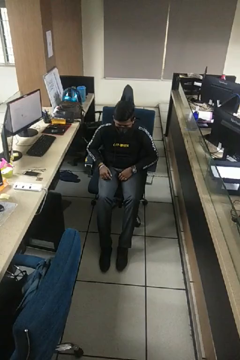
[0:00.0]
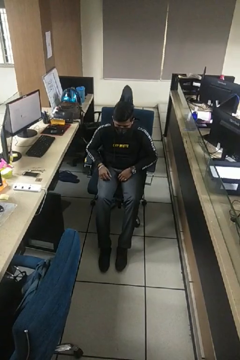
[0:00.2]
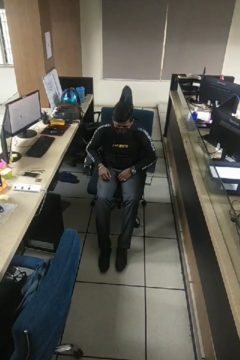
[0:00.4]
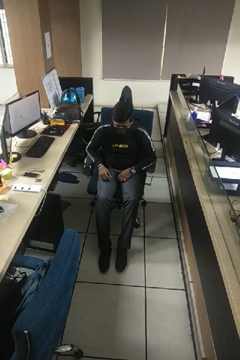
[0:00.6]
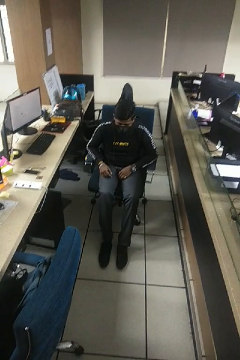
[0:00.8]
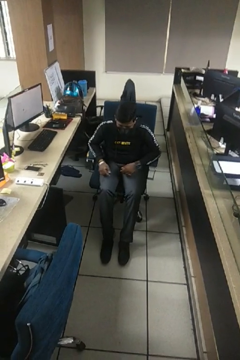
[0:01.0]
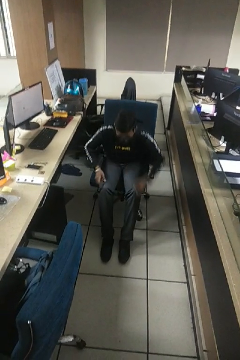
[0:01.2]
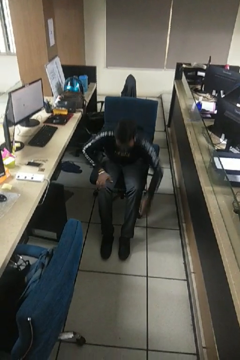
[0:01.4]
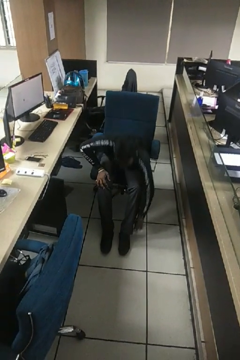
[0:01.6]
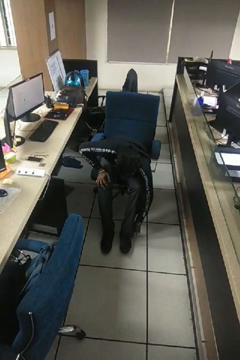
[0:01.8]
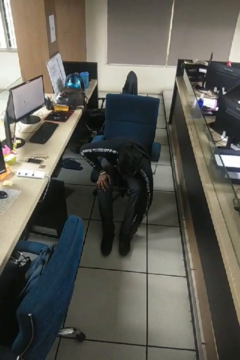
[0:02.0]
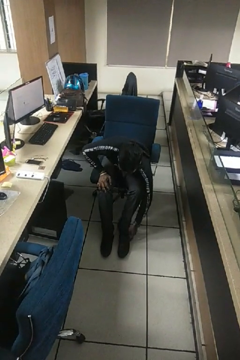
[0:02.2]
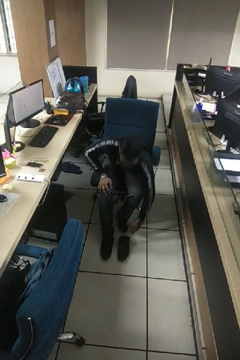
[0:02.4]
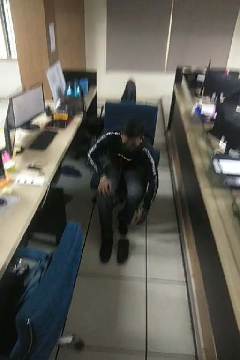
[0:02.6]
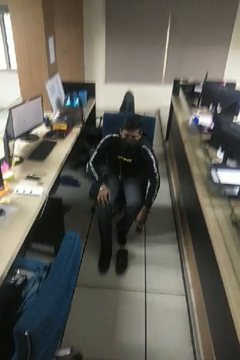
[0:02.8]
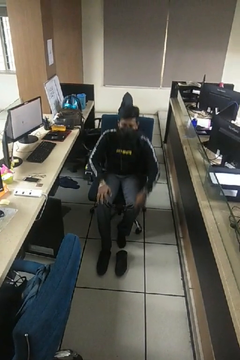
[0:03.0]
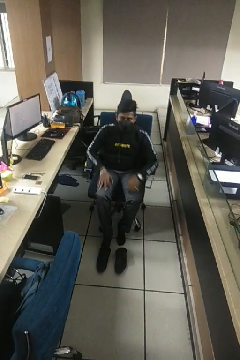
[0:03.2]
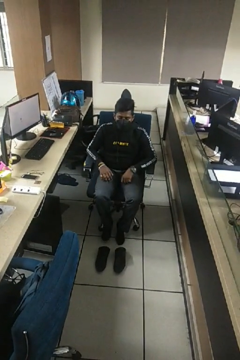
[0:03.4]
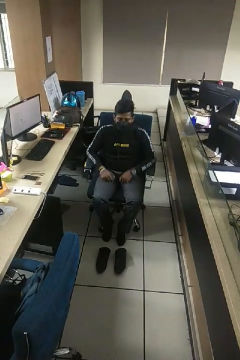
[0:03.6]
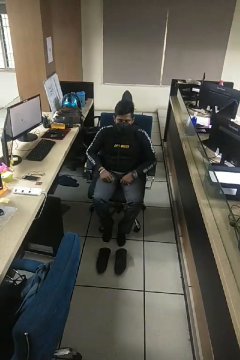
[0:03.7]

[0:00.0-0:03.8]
person takes off shoes

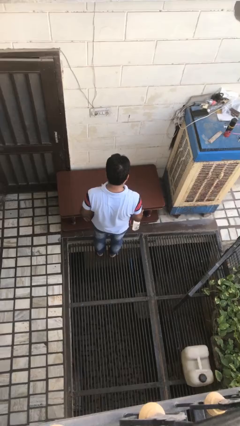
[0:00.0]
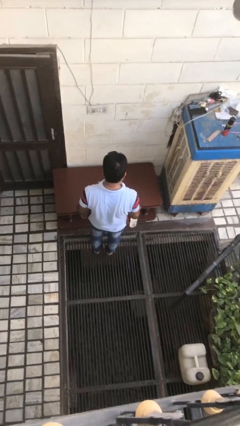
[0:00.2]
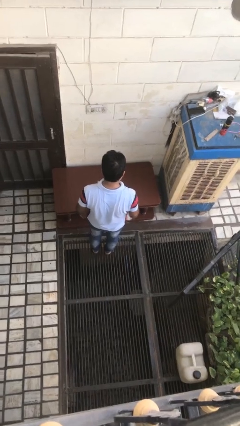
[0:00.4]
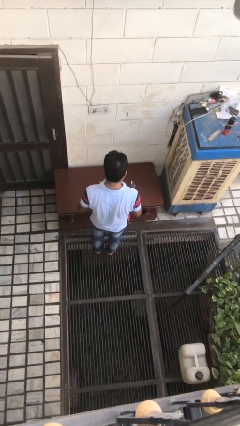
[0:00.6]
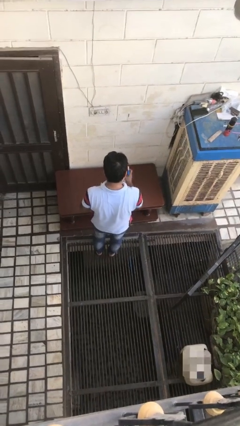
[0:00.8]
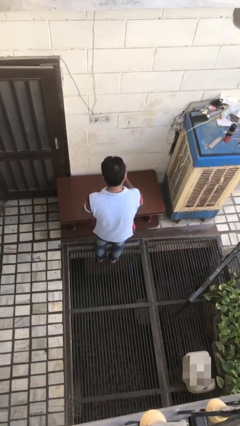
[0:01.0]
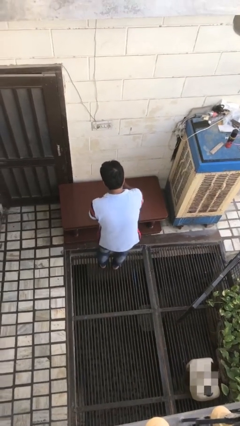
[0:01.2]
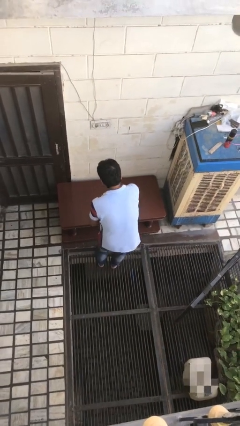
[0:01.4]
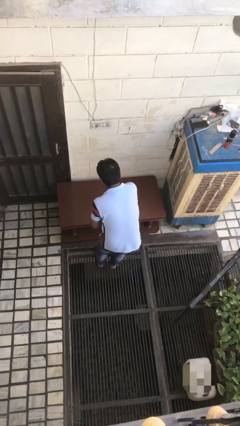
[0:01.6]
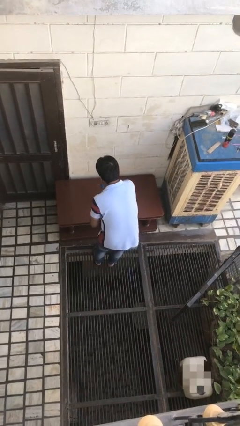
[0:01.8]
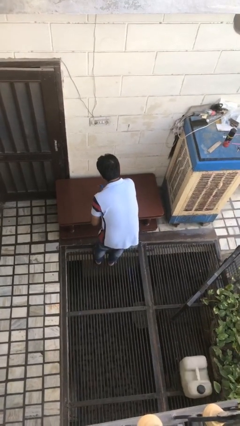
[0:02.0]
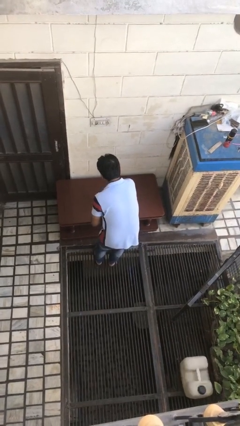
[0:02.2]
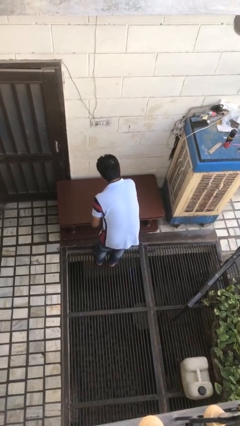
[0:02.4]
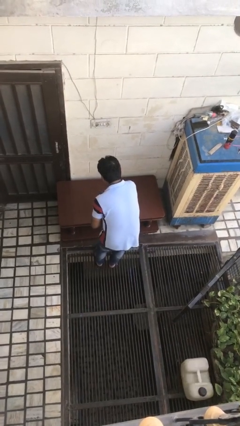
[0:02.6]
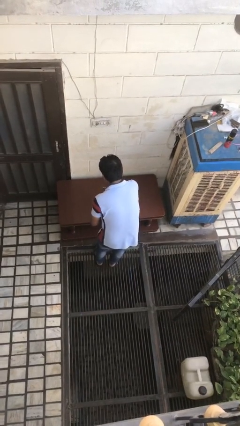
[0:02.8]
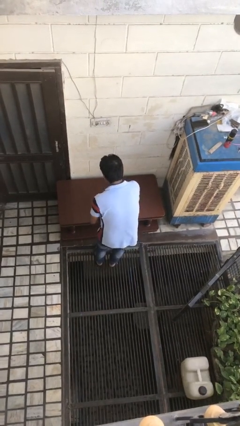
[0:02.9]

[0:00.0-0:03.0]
person sprays from bottle

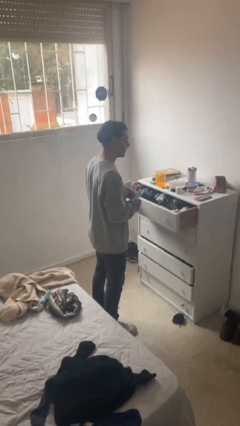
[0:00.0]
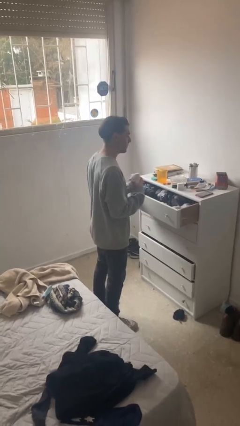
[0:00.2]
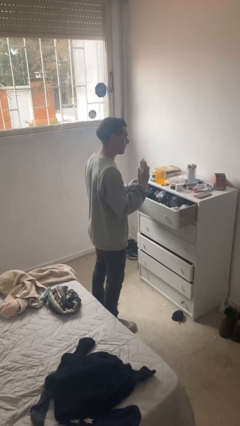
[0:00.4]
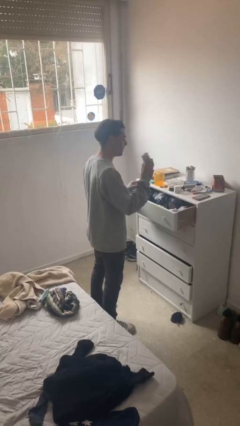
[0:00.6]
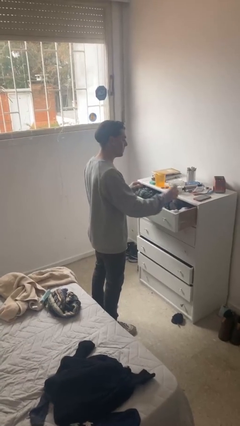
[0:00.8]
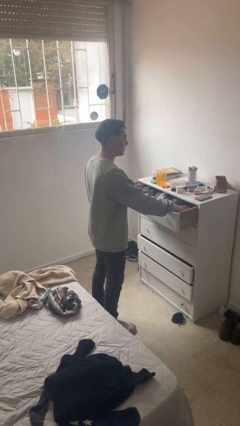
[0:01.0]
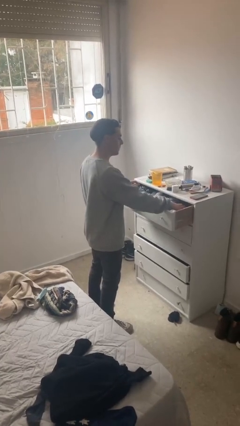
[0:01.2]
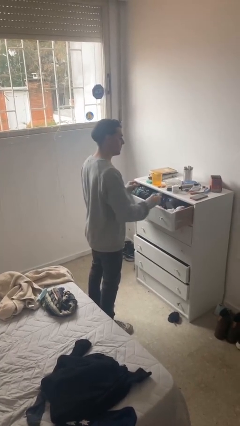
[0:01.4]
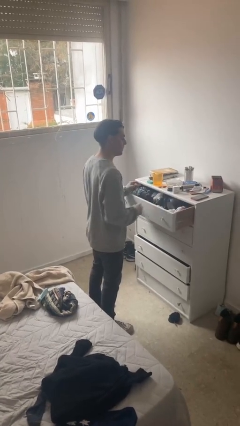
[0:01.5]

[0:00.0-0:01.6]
person puts clothes into dresser

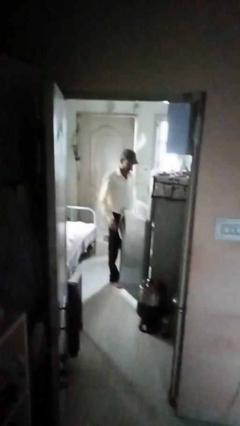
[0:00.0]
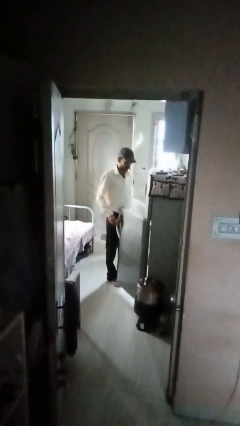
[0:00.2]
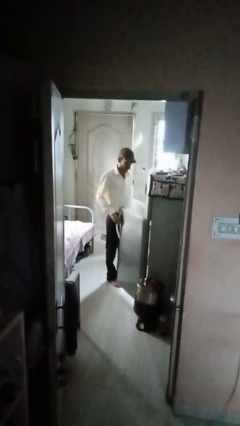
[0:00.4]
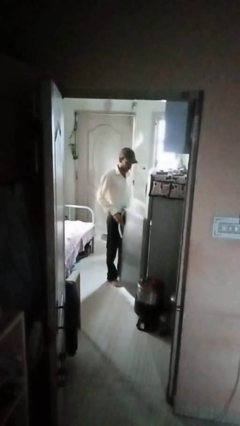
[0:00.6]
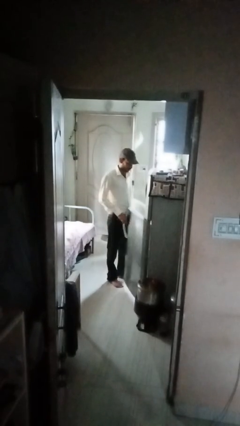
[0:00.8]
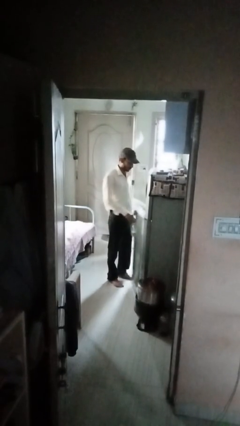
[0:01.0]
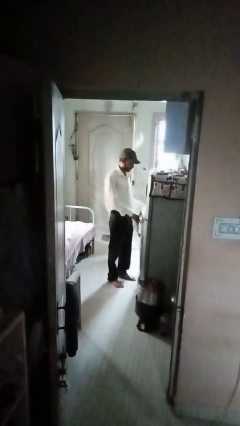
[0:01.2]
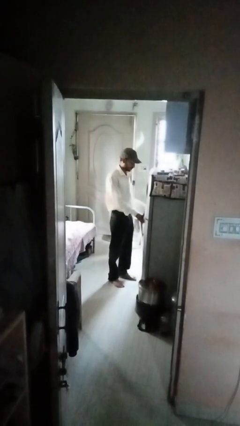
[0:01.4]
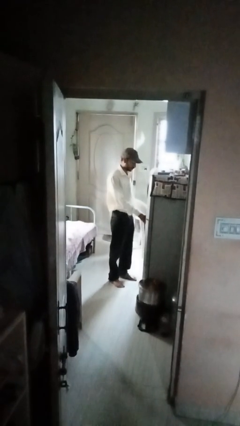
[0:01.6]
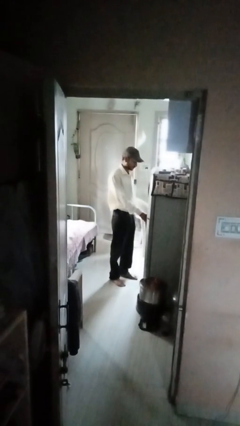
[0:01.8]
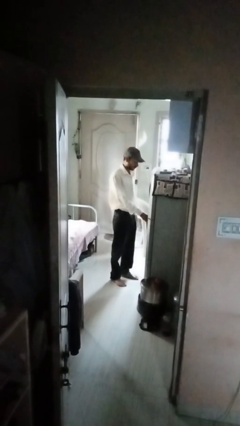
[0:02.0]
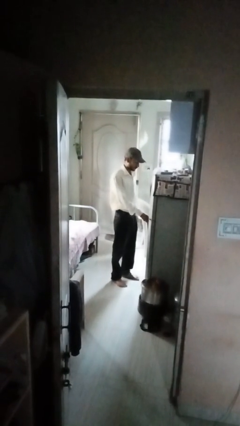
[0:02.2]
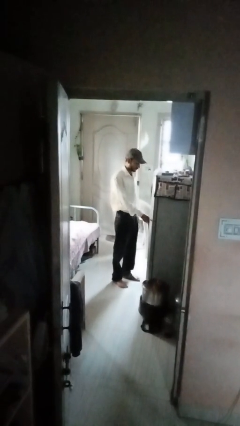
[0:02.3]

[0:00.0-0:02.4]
person closes refrigerator

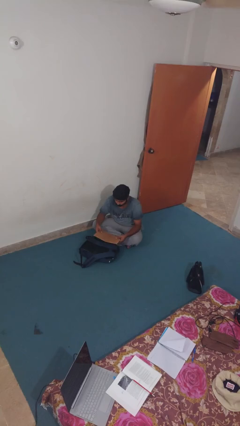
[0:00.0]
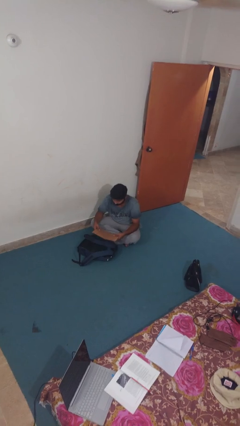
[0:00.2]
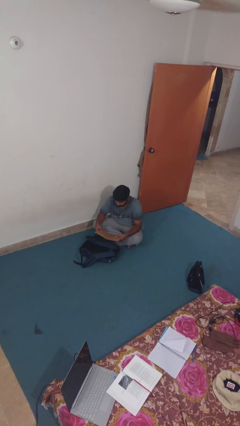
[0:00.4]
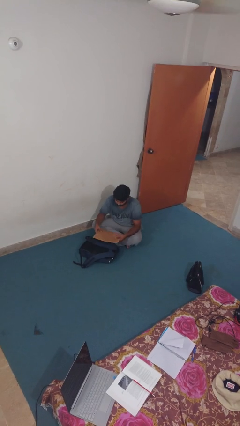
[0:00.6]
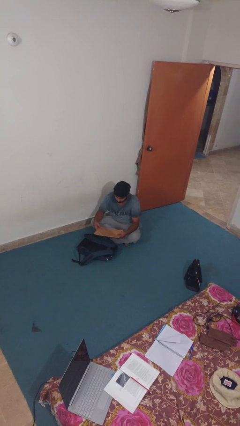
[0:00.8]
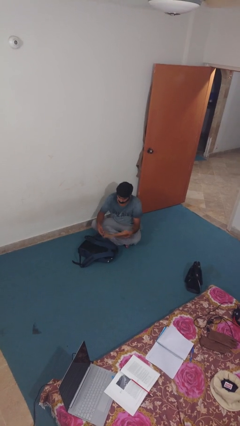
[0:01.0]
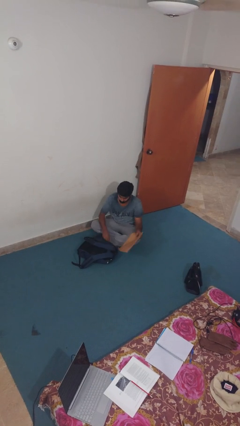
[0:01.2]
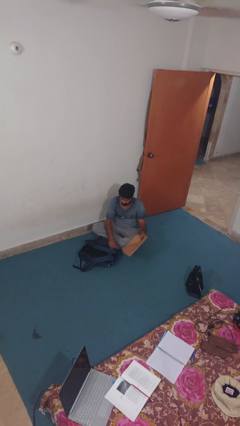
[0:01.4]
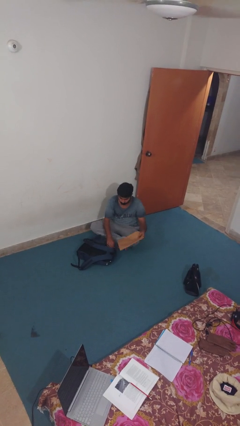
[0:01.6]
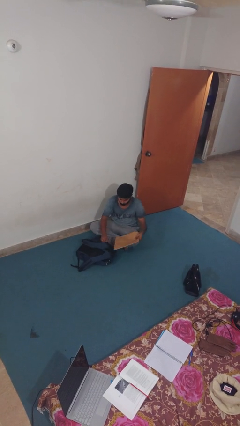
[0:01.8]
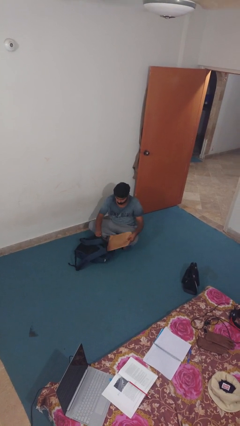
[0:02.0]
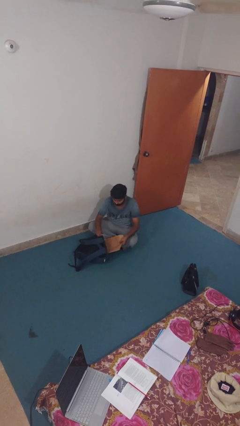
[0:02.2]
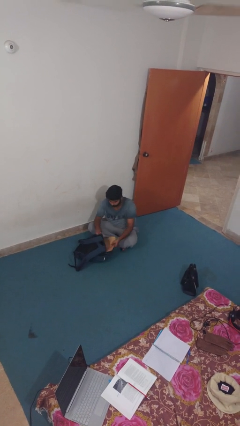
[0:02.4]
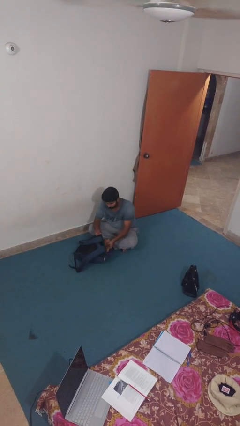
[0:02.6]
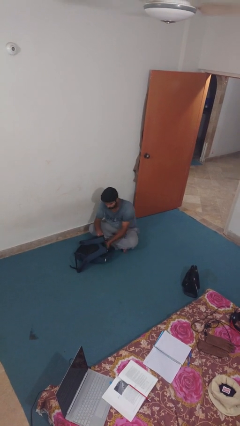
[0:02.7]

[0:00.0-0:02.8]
person puts object into backpack

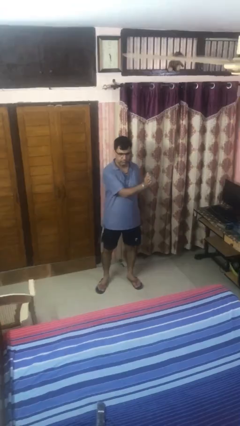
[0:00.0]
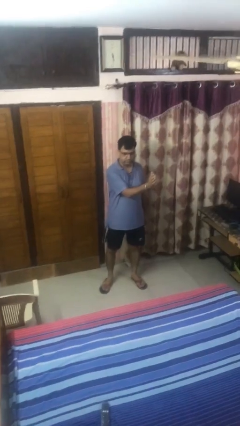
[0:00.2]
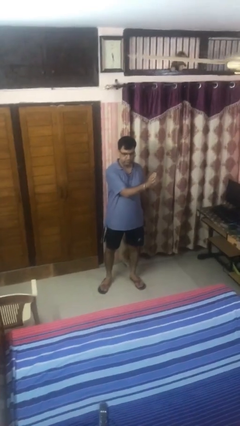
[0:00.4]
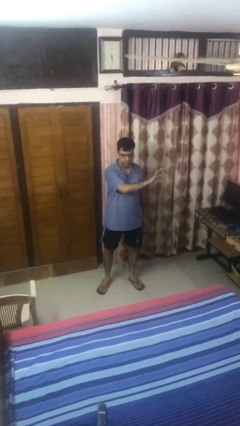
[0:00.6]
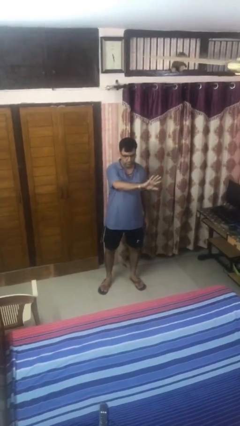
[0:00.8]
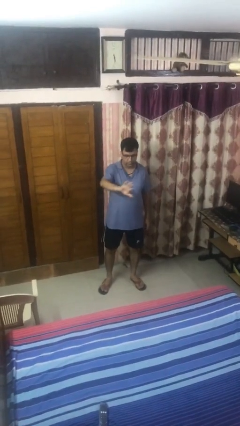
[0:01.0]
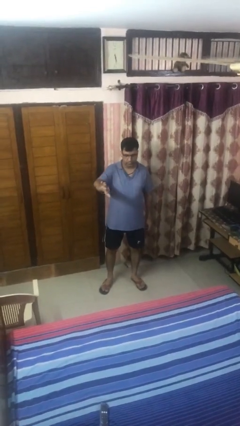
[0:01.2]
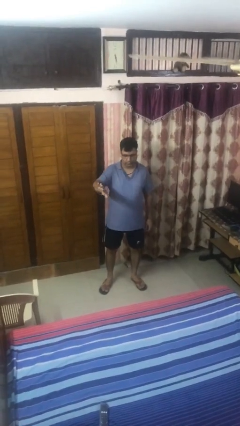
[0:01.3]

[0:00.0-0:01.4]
person gestures swipe right

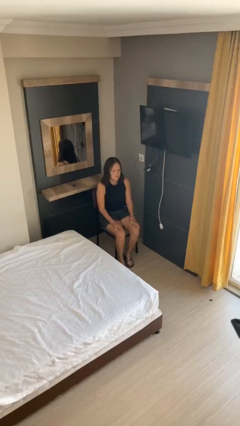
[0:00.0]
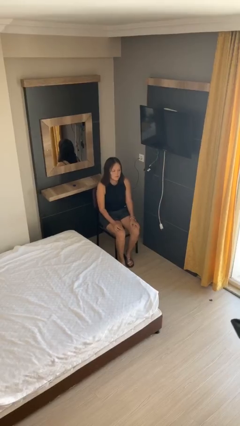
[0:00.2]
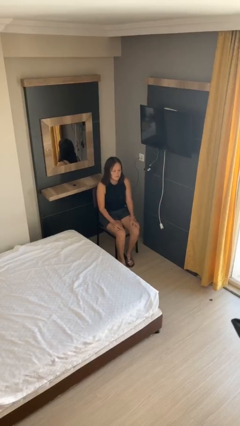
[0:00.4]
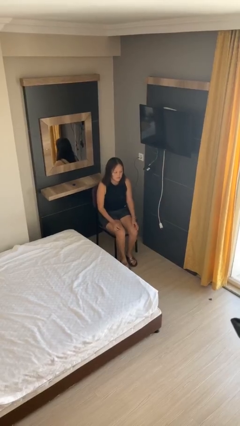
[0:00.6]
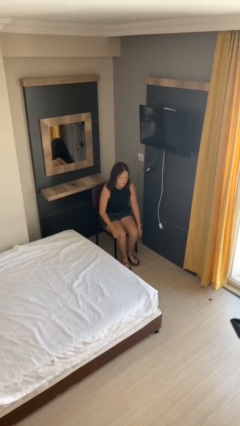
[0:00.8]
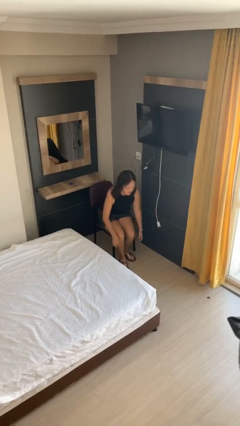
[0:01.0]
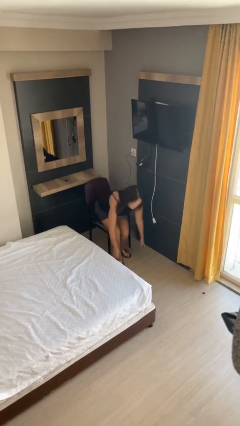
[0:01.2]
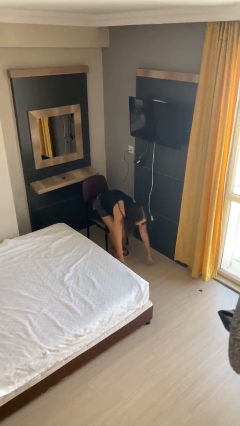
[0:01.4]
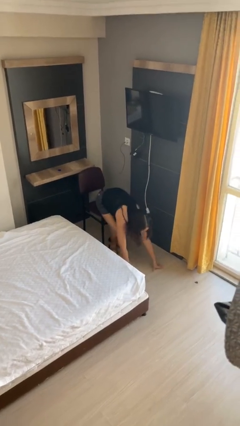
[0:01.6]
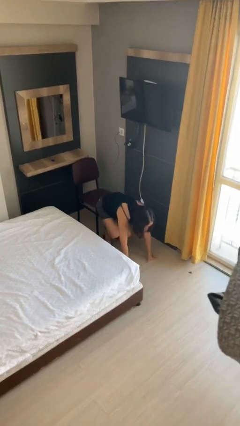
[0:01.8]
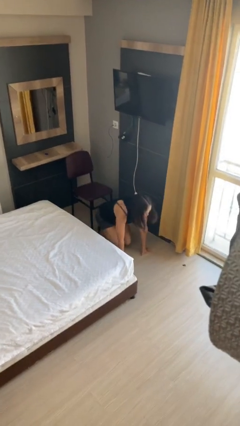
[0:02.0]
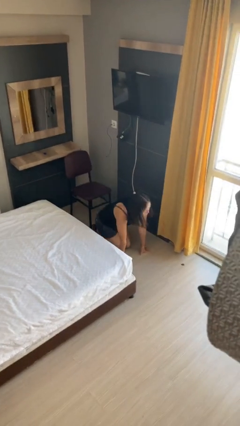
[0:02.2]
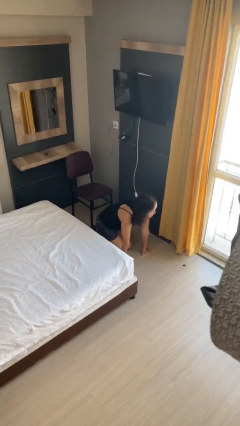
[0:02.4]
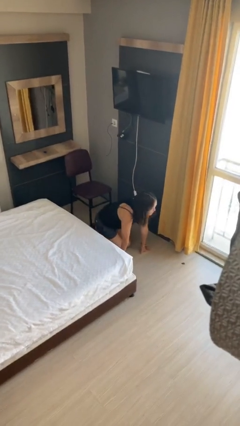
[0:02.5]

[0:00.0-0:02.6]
person falls from chair
